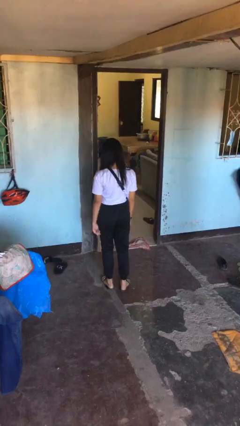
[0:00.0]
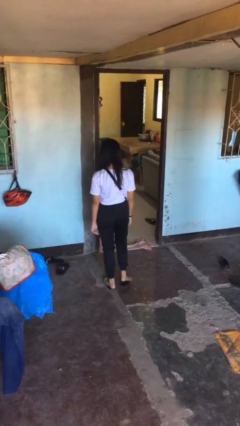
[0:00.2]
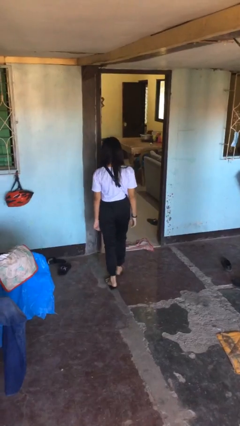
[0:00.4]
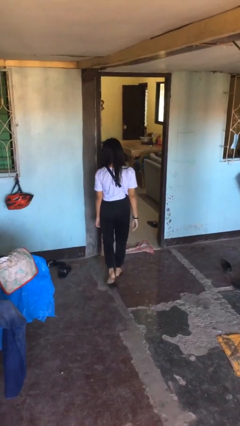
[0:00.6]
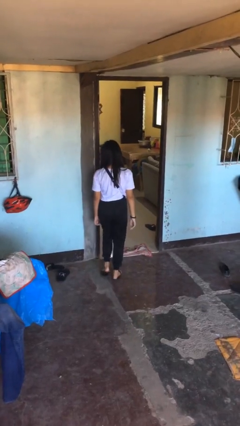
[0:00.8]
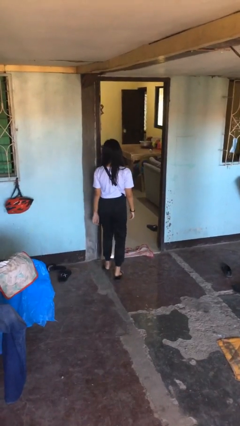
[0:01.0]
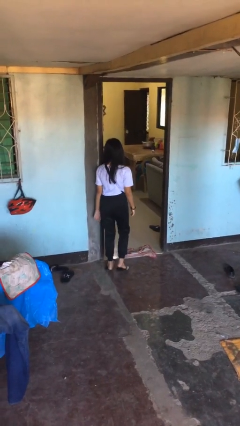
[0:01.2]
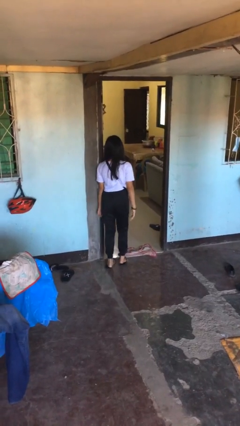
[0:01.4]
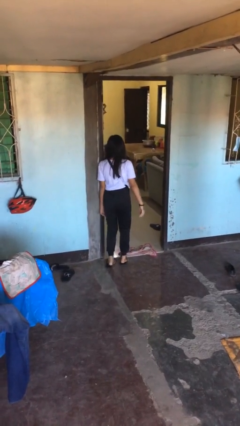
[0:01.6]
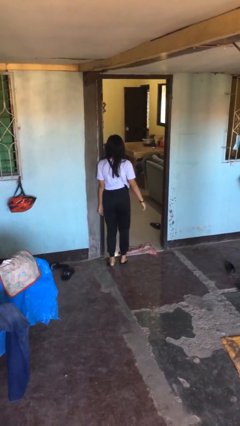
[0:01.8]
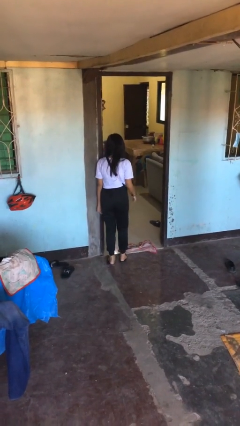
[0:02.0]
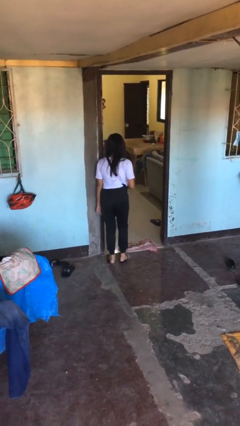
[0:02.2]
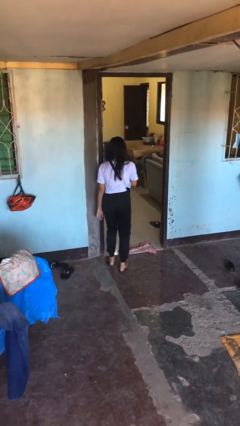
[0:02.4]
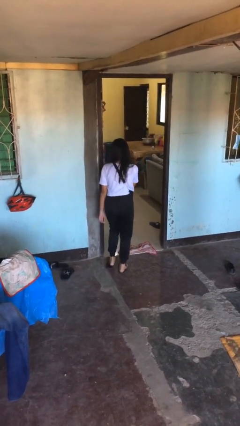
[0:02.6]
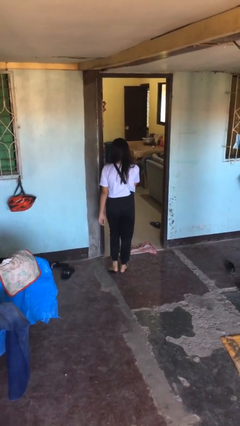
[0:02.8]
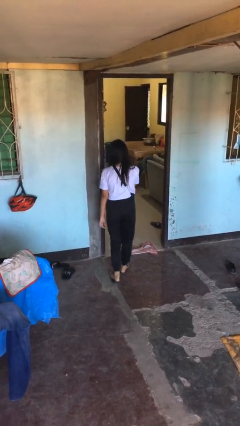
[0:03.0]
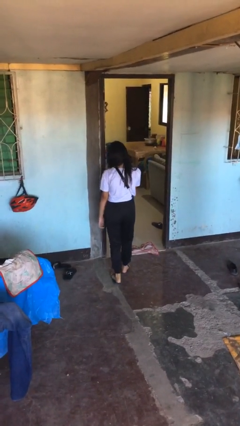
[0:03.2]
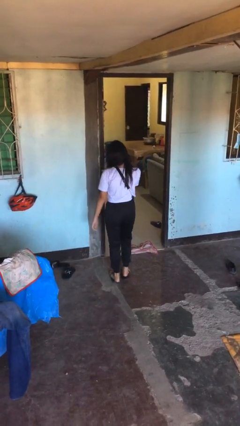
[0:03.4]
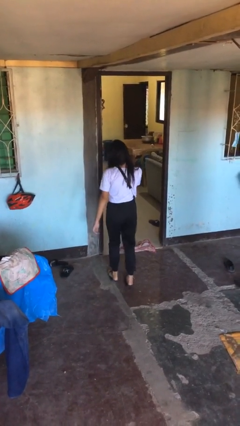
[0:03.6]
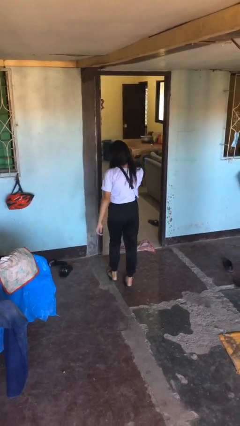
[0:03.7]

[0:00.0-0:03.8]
person bumps into wall

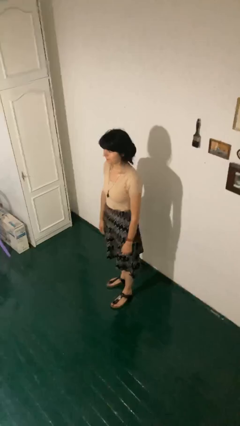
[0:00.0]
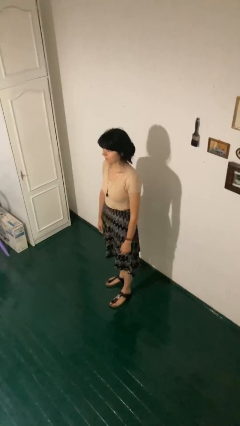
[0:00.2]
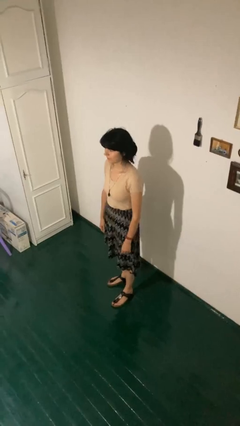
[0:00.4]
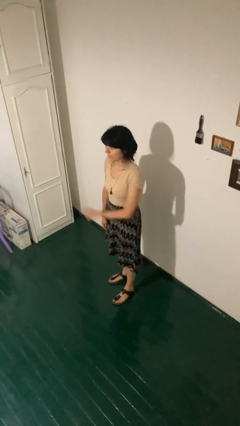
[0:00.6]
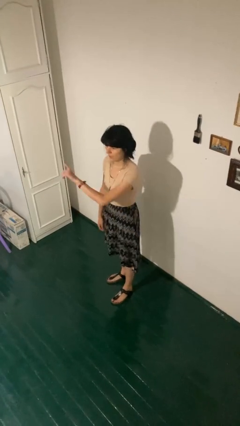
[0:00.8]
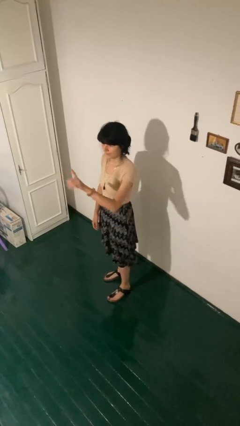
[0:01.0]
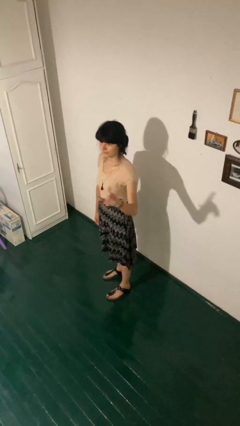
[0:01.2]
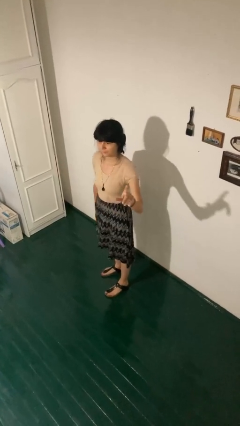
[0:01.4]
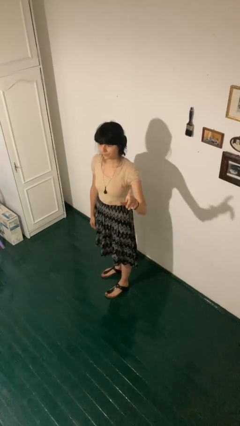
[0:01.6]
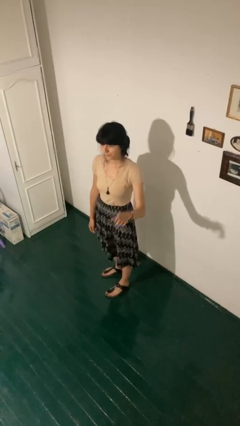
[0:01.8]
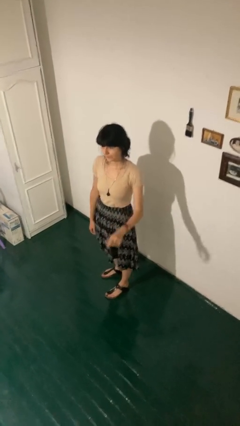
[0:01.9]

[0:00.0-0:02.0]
person gestures swipe left

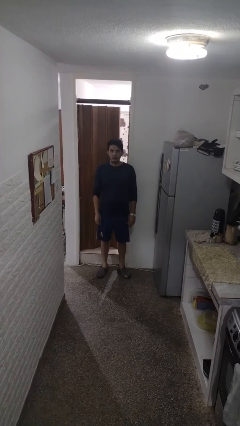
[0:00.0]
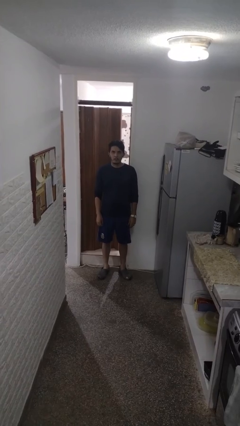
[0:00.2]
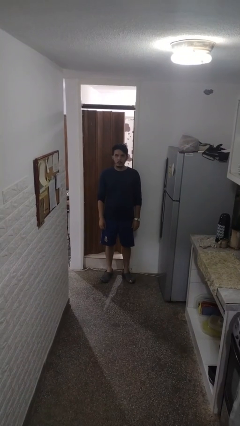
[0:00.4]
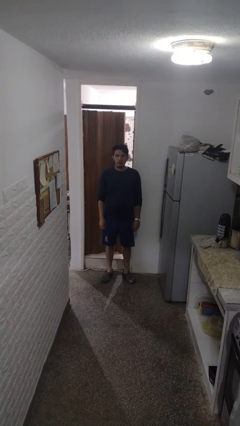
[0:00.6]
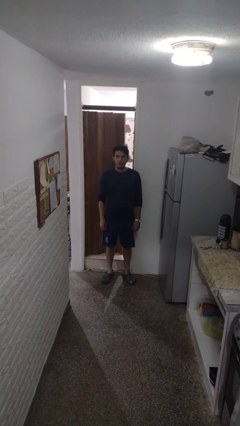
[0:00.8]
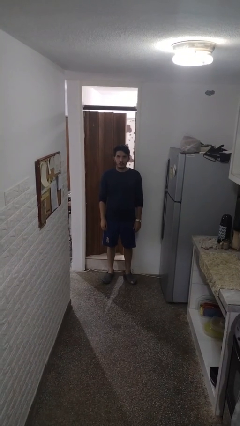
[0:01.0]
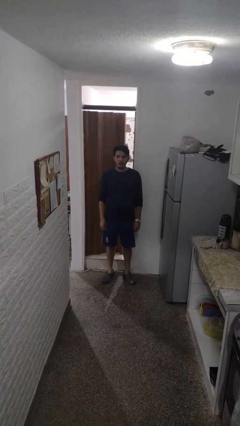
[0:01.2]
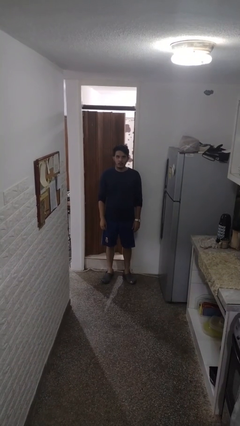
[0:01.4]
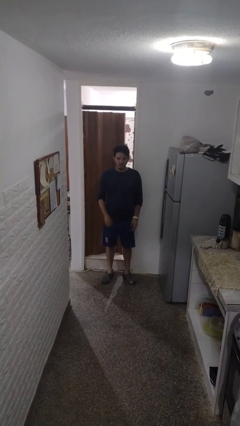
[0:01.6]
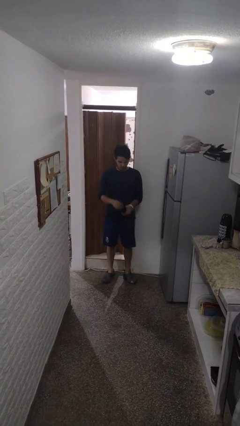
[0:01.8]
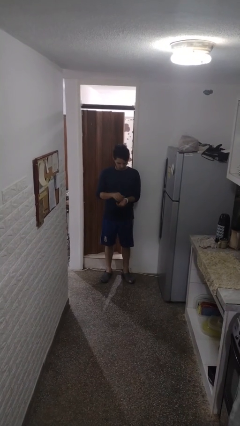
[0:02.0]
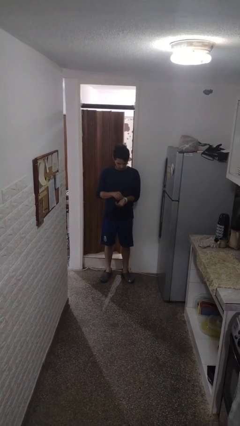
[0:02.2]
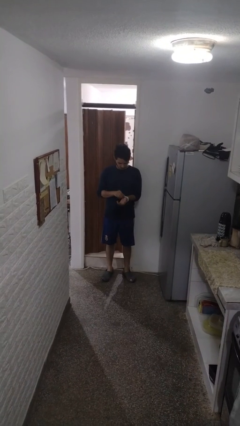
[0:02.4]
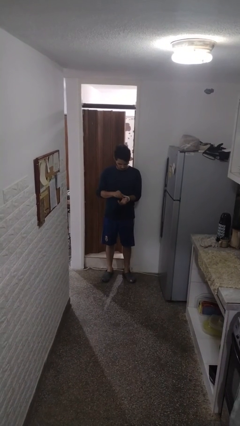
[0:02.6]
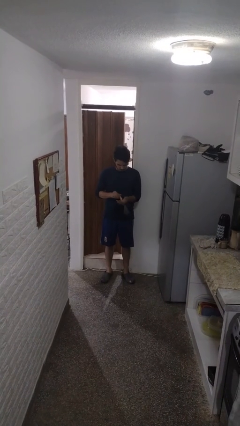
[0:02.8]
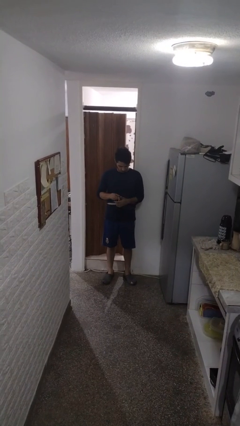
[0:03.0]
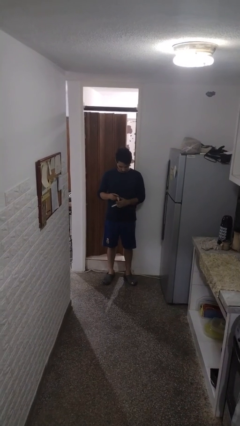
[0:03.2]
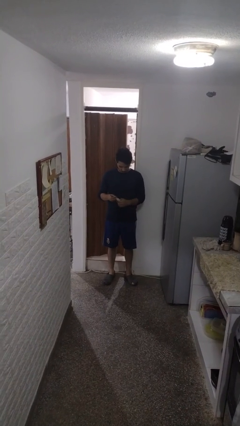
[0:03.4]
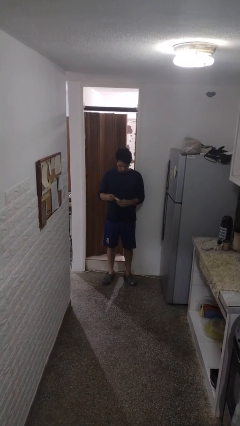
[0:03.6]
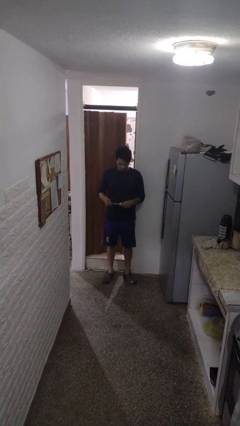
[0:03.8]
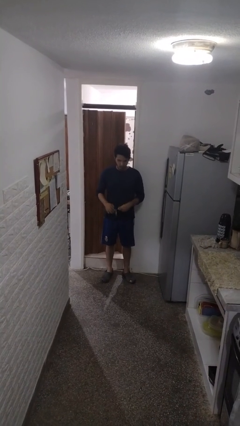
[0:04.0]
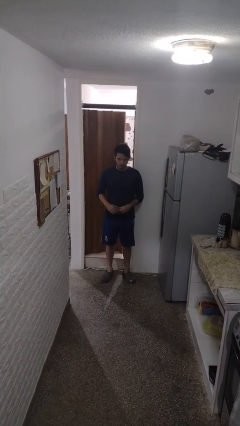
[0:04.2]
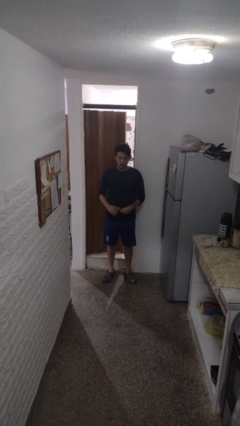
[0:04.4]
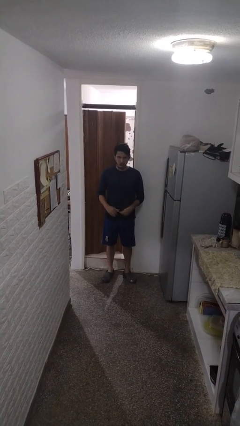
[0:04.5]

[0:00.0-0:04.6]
person takes off wristwatch

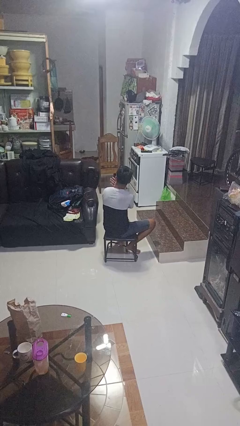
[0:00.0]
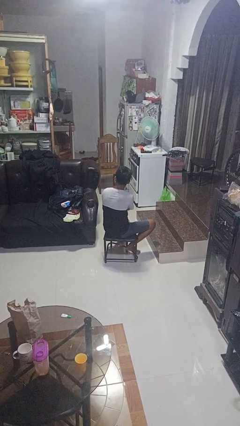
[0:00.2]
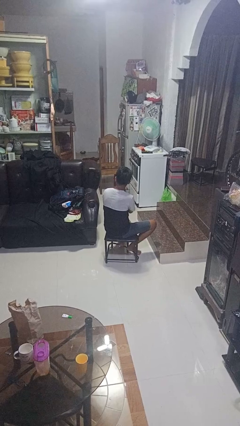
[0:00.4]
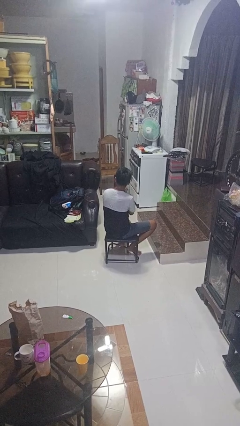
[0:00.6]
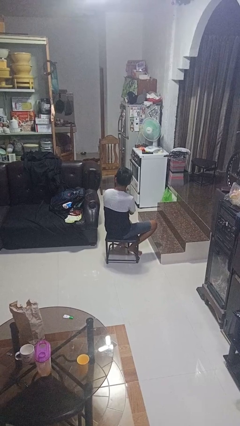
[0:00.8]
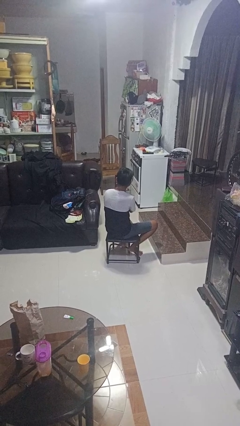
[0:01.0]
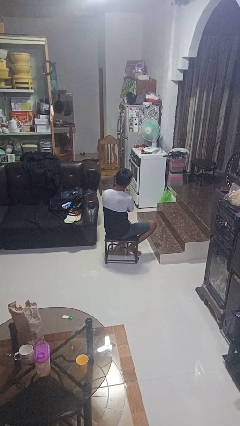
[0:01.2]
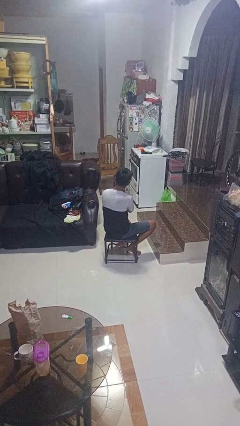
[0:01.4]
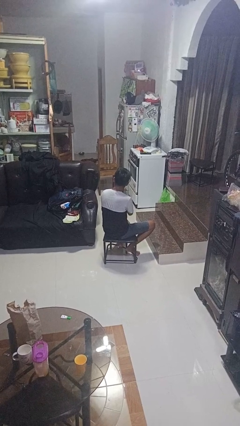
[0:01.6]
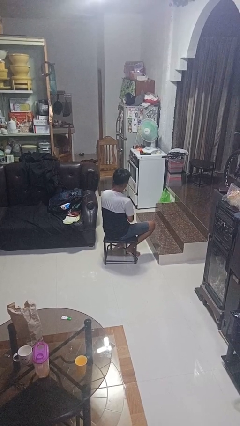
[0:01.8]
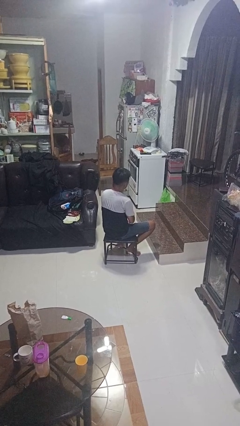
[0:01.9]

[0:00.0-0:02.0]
person strokes chin

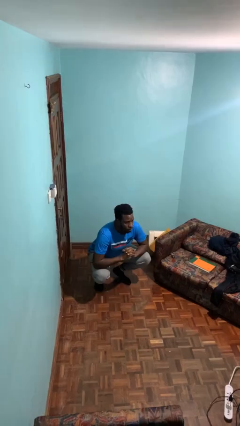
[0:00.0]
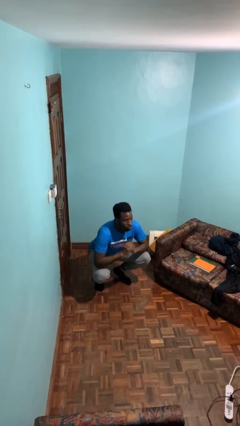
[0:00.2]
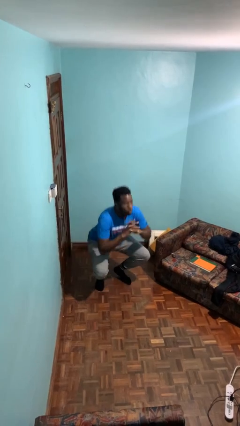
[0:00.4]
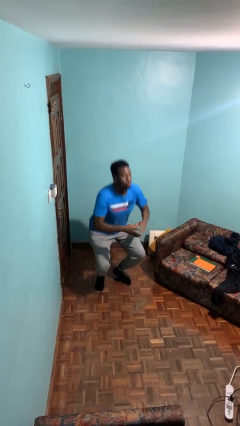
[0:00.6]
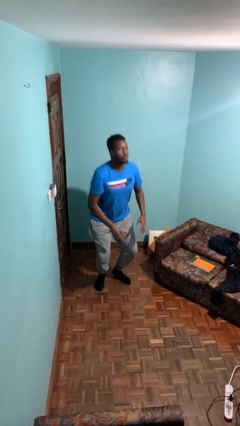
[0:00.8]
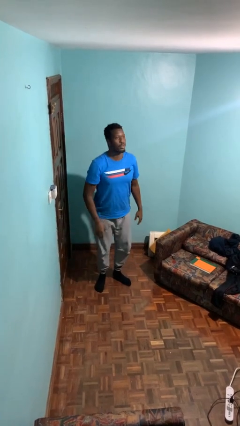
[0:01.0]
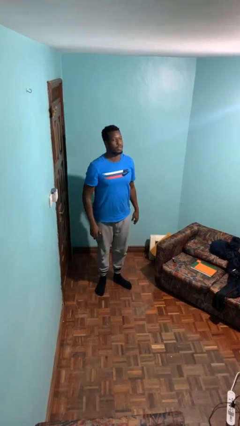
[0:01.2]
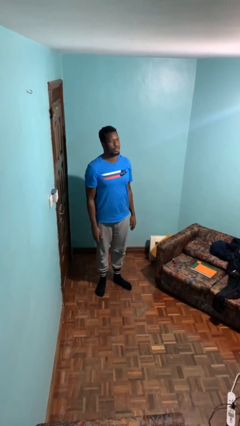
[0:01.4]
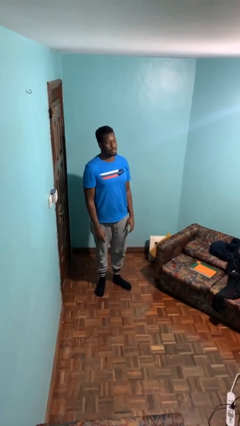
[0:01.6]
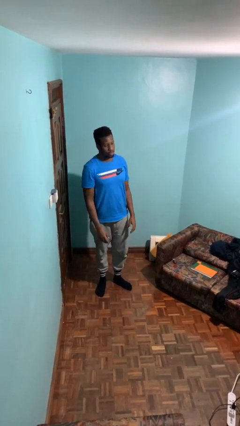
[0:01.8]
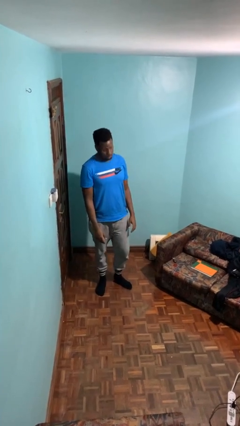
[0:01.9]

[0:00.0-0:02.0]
person stands up

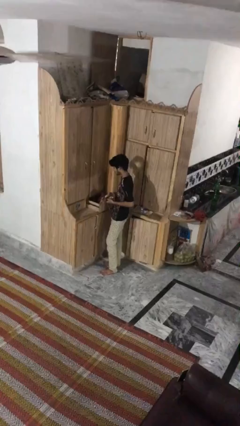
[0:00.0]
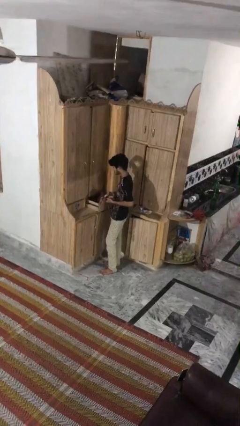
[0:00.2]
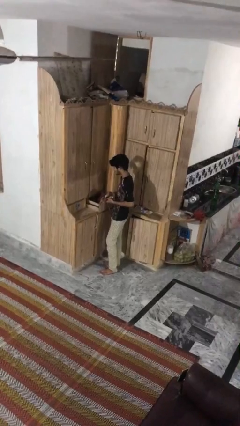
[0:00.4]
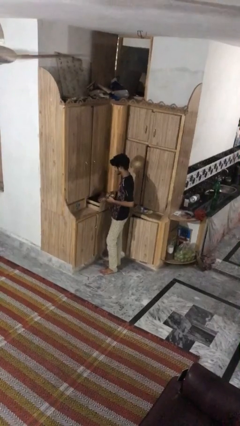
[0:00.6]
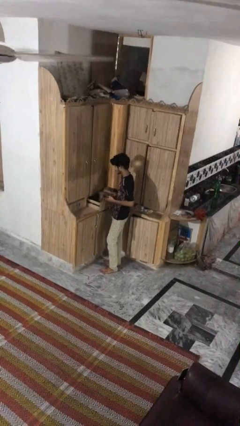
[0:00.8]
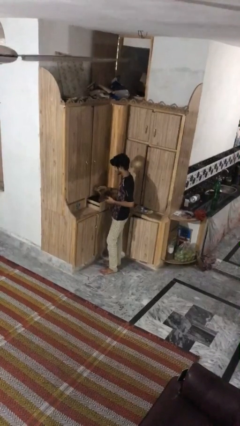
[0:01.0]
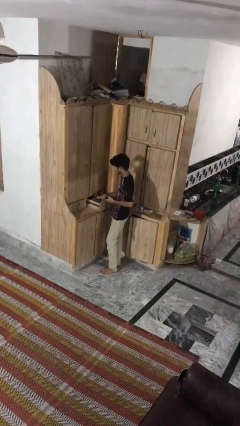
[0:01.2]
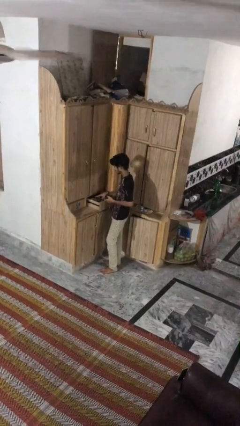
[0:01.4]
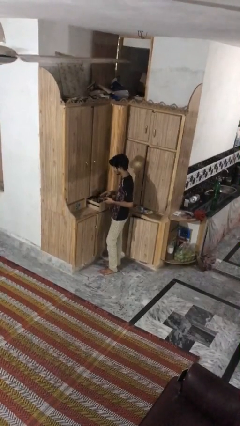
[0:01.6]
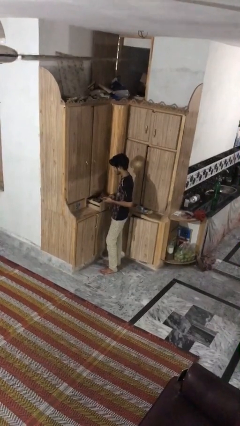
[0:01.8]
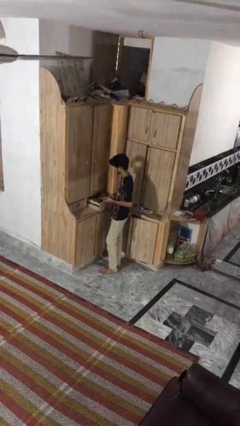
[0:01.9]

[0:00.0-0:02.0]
person puts clothes into dresser

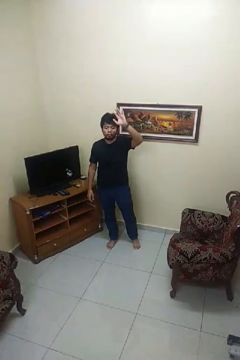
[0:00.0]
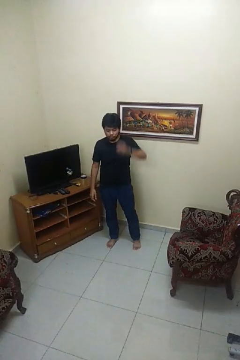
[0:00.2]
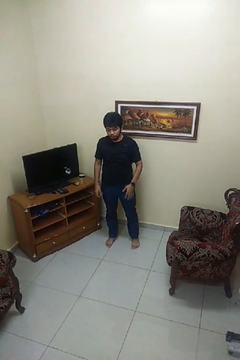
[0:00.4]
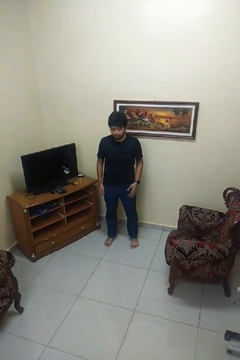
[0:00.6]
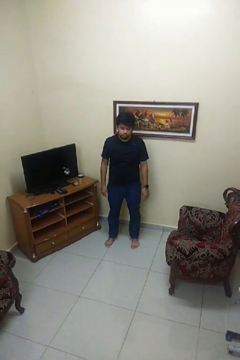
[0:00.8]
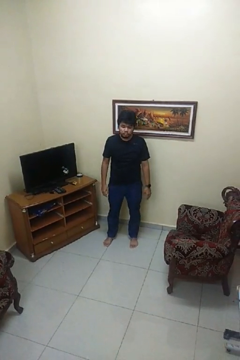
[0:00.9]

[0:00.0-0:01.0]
person gestures lower hand
